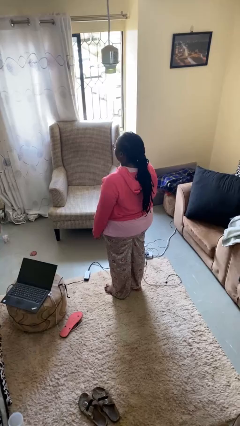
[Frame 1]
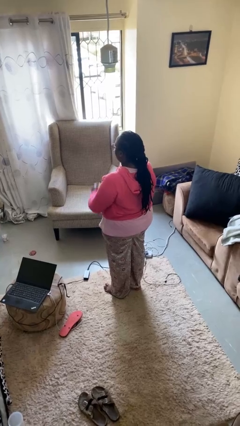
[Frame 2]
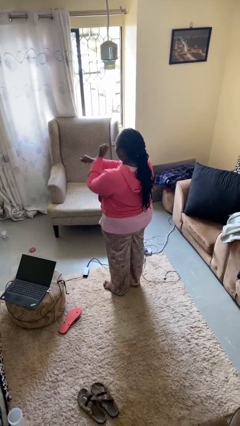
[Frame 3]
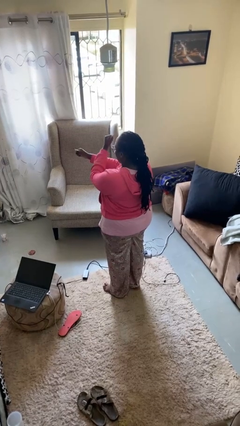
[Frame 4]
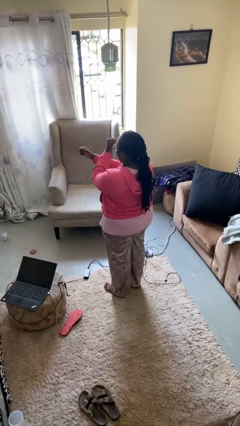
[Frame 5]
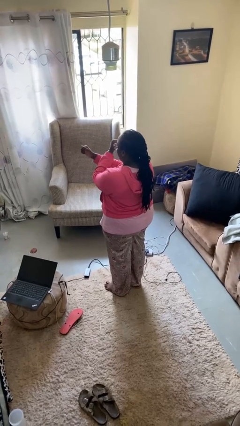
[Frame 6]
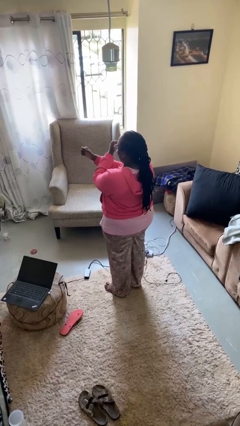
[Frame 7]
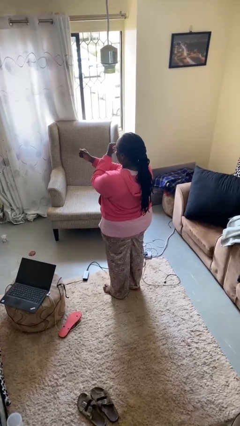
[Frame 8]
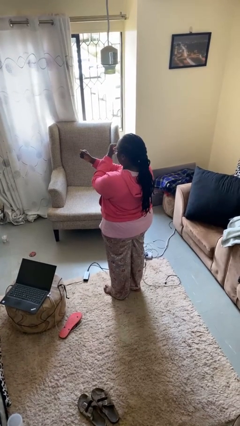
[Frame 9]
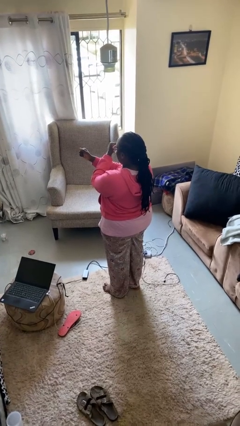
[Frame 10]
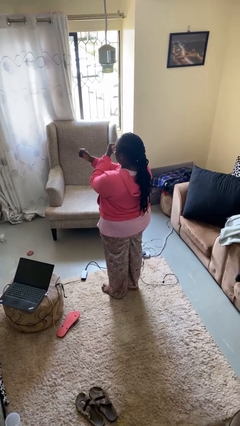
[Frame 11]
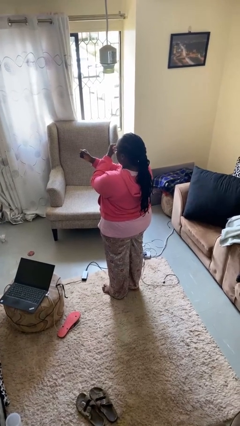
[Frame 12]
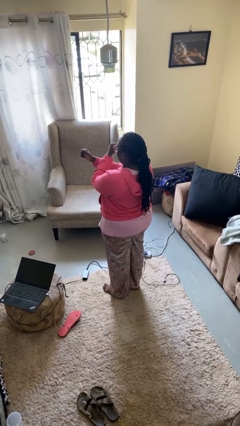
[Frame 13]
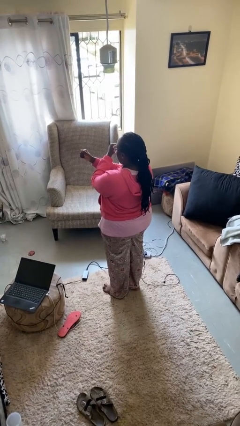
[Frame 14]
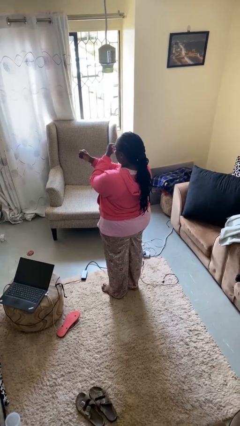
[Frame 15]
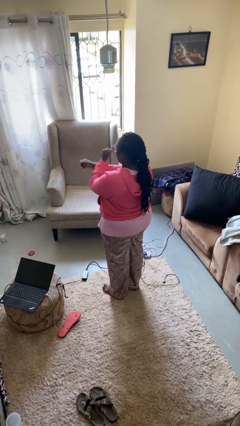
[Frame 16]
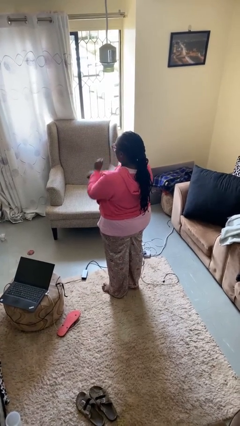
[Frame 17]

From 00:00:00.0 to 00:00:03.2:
person gestures arms x

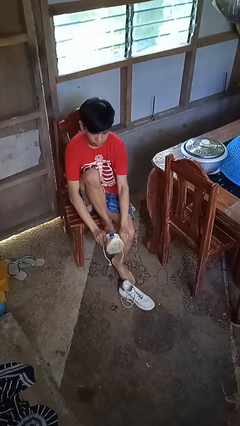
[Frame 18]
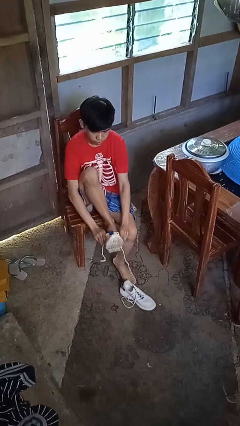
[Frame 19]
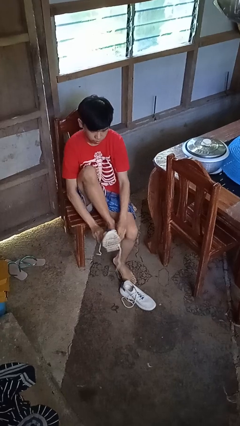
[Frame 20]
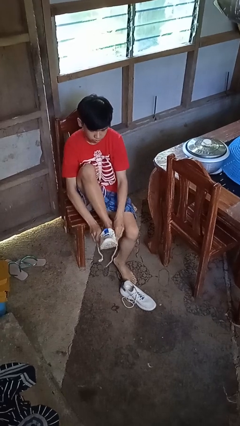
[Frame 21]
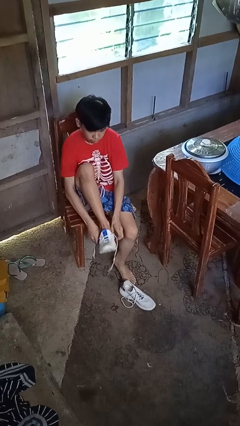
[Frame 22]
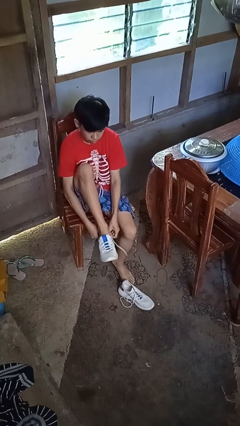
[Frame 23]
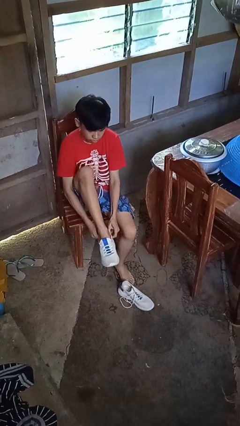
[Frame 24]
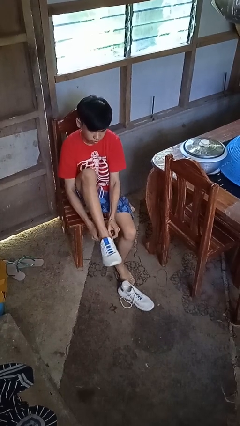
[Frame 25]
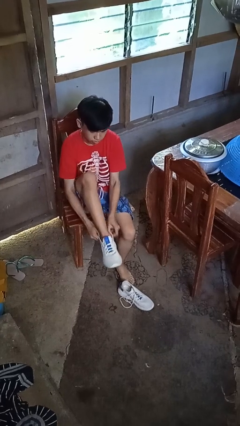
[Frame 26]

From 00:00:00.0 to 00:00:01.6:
person puts on shoes

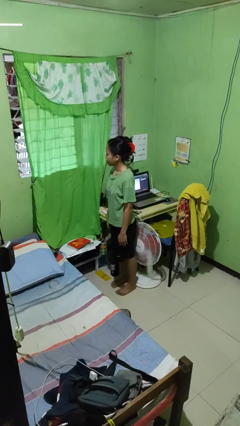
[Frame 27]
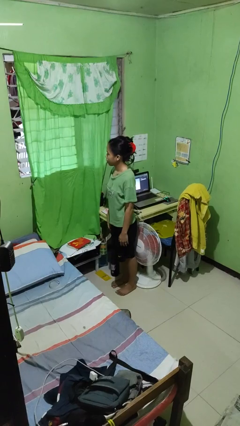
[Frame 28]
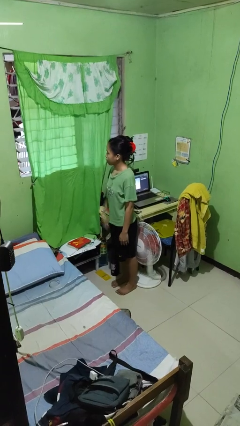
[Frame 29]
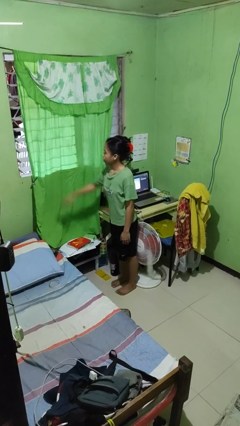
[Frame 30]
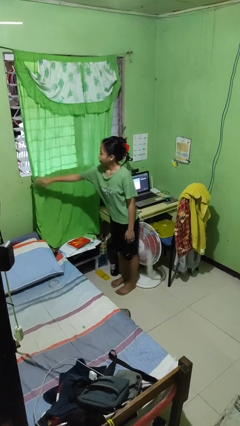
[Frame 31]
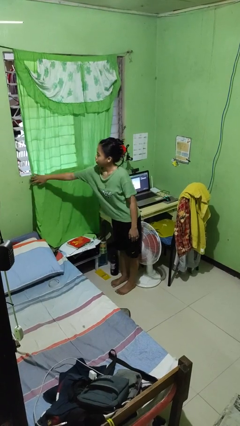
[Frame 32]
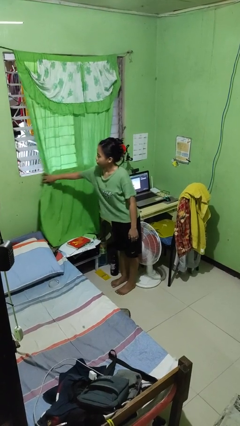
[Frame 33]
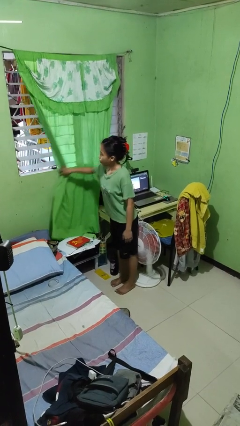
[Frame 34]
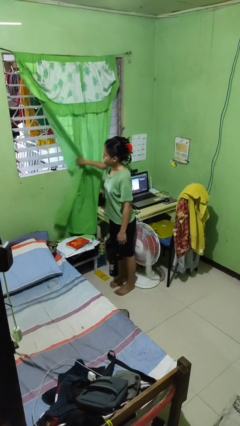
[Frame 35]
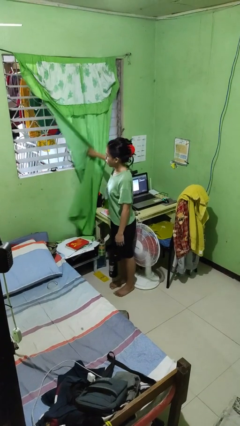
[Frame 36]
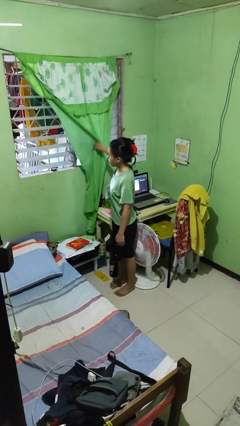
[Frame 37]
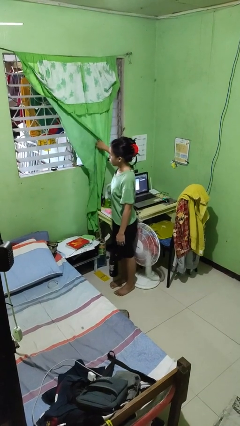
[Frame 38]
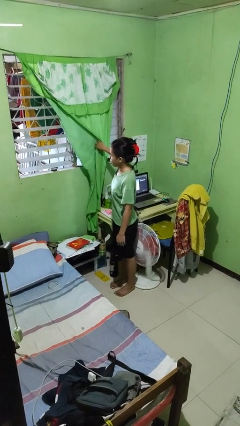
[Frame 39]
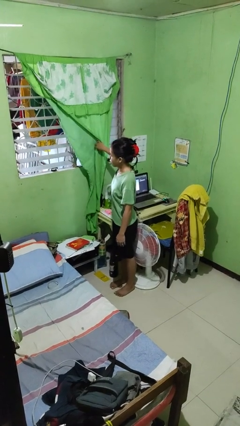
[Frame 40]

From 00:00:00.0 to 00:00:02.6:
person opens curtains

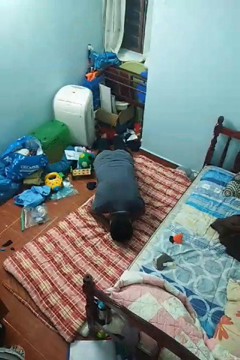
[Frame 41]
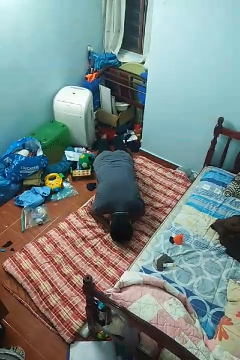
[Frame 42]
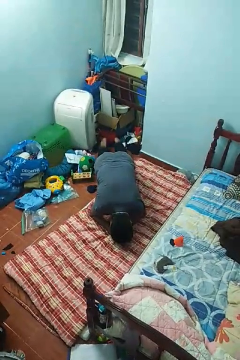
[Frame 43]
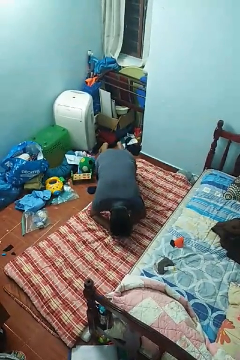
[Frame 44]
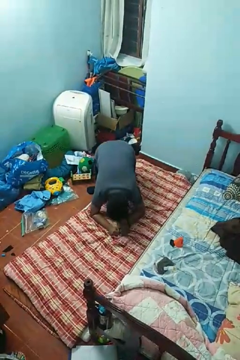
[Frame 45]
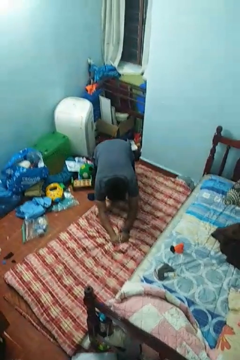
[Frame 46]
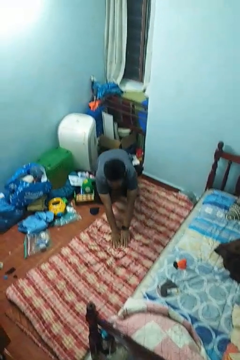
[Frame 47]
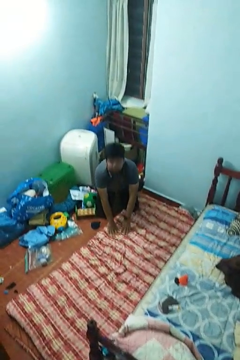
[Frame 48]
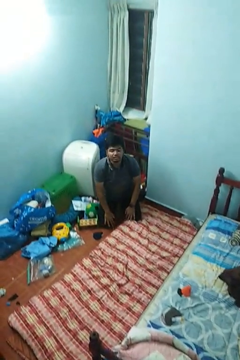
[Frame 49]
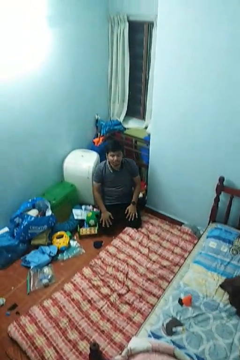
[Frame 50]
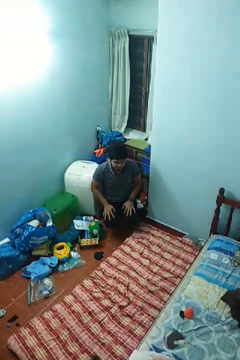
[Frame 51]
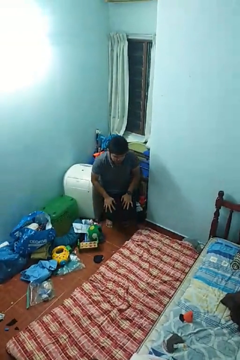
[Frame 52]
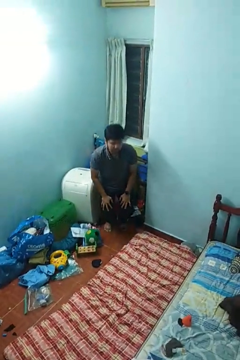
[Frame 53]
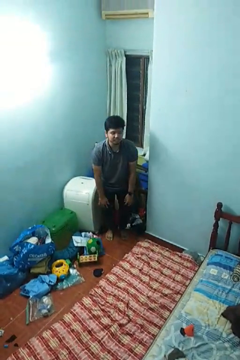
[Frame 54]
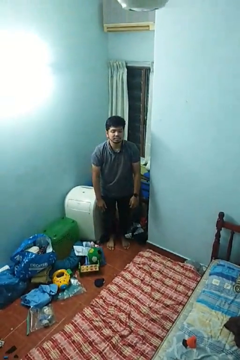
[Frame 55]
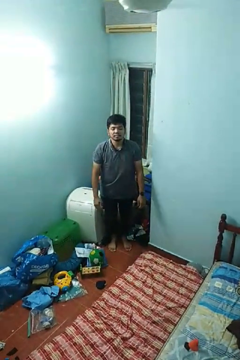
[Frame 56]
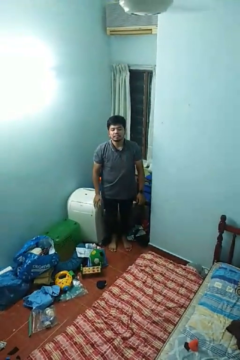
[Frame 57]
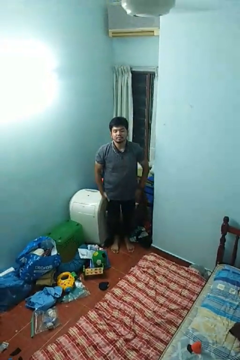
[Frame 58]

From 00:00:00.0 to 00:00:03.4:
person stands up from floor

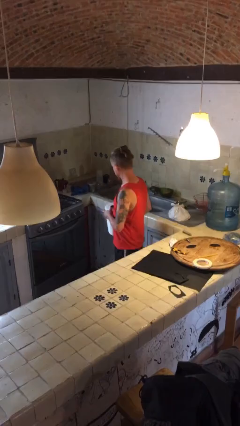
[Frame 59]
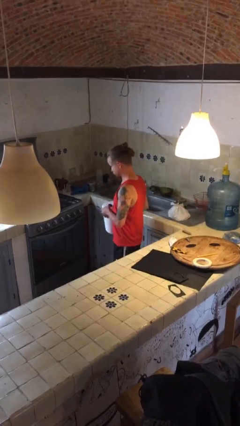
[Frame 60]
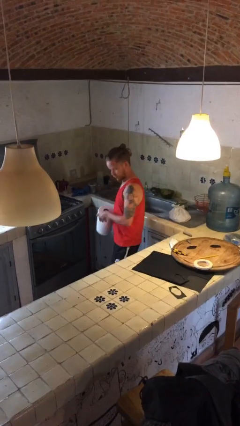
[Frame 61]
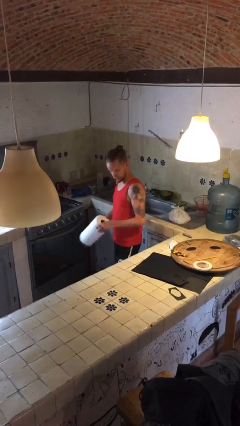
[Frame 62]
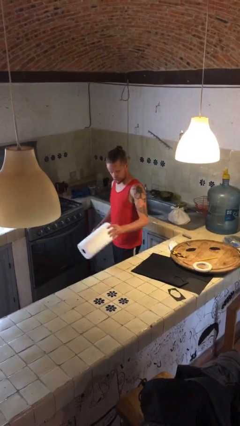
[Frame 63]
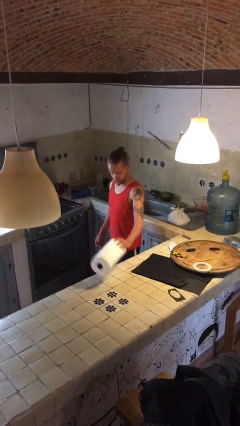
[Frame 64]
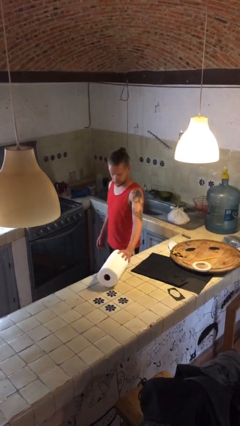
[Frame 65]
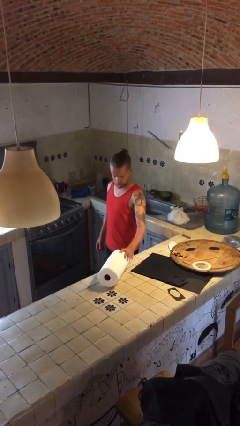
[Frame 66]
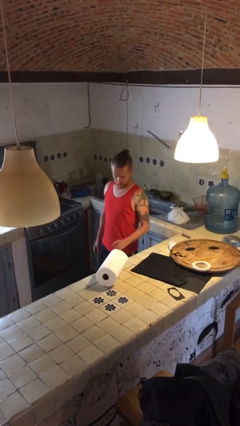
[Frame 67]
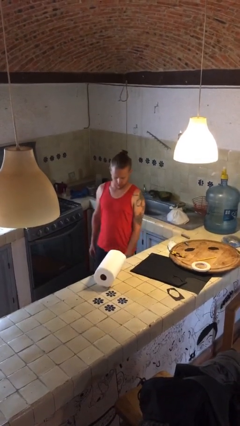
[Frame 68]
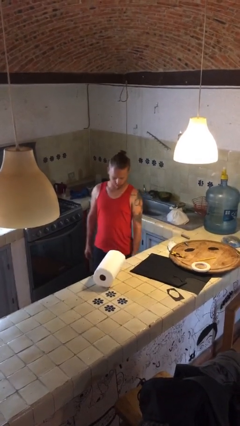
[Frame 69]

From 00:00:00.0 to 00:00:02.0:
person puts down object on countertop

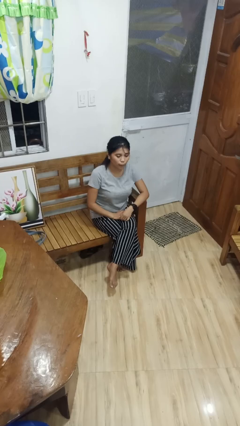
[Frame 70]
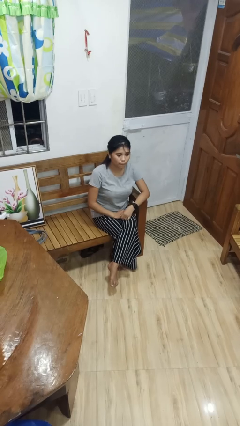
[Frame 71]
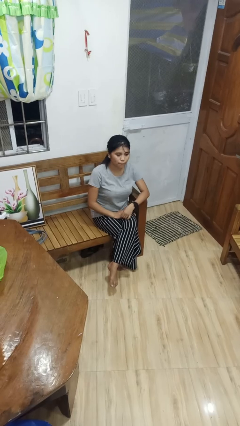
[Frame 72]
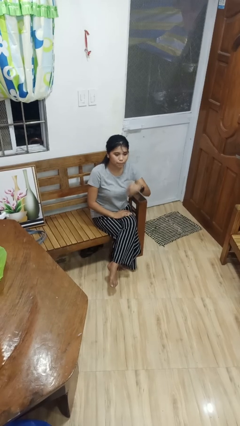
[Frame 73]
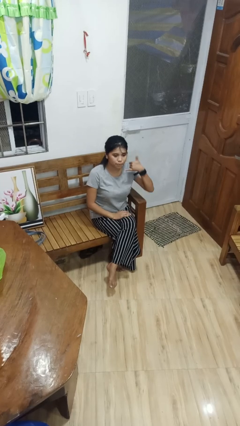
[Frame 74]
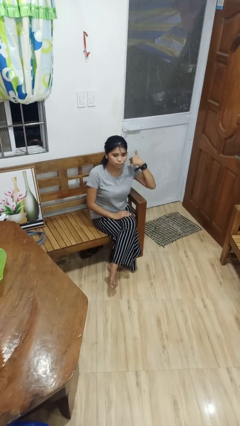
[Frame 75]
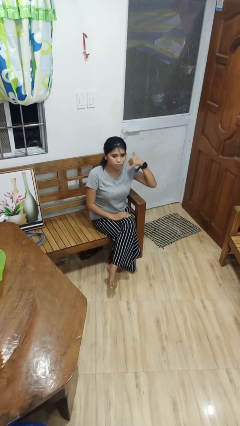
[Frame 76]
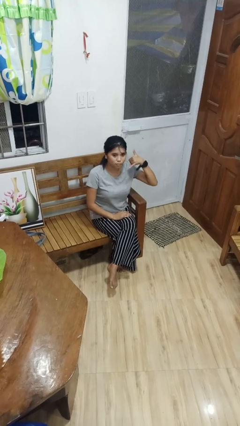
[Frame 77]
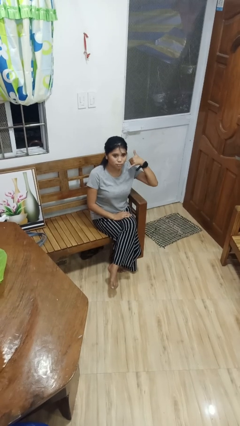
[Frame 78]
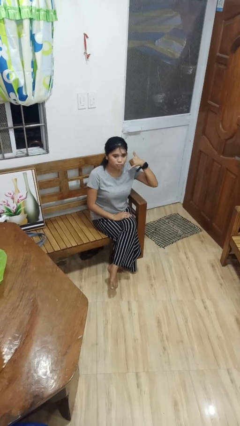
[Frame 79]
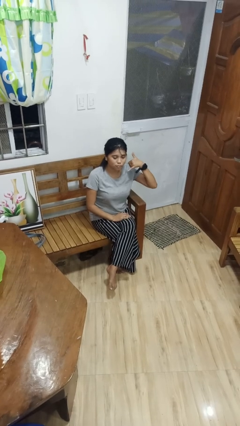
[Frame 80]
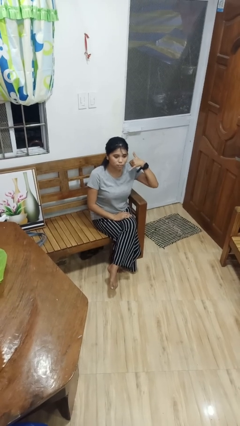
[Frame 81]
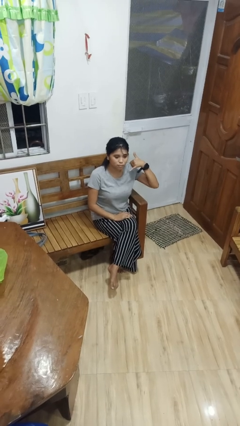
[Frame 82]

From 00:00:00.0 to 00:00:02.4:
person gestures call me

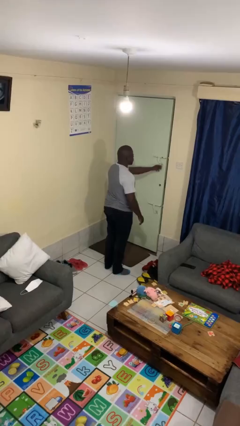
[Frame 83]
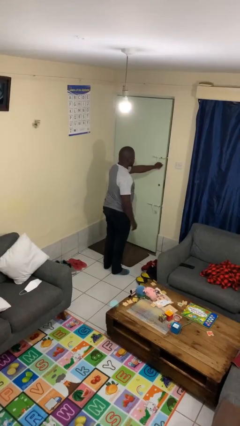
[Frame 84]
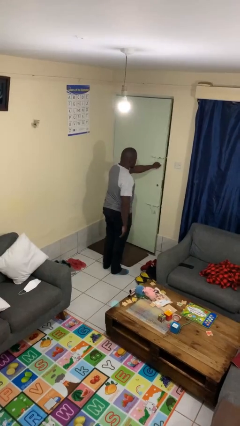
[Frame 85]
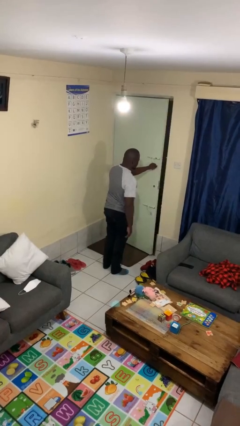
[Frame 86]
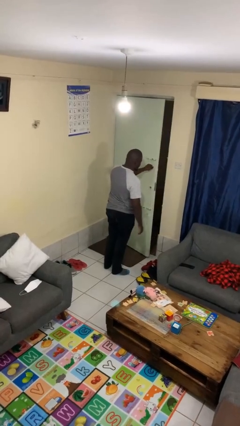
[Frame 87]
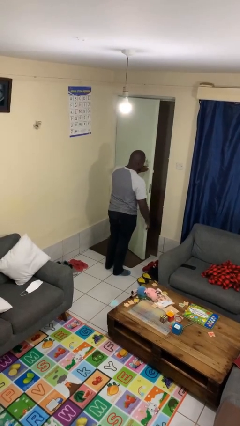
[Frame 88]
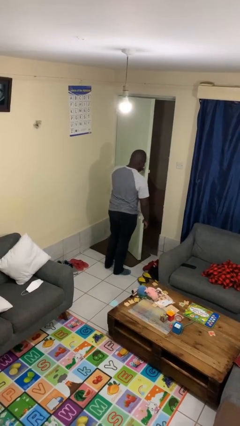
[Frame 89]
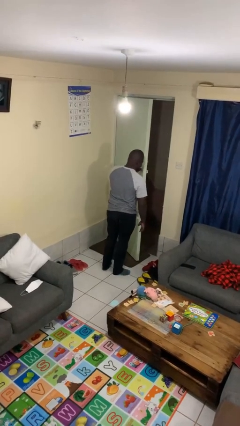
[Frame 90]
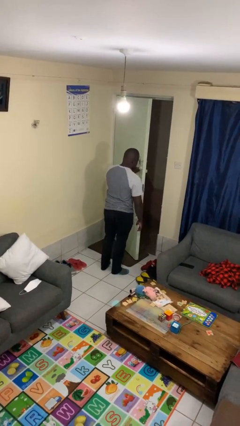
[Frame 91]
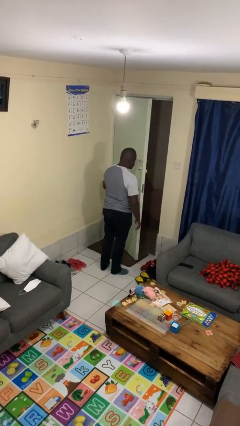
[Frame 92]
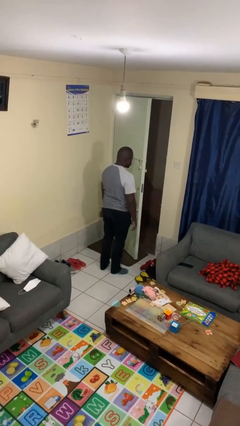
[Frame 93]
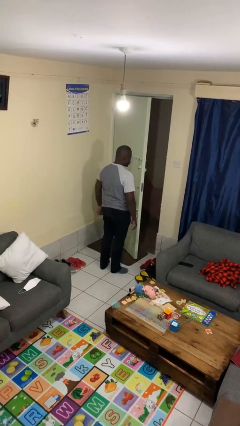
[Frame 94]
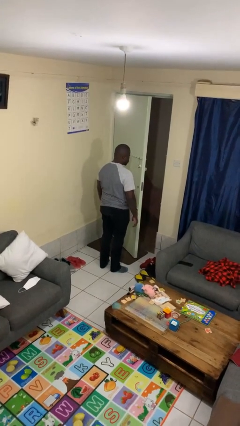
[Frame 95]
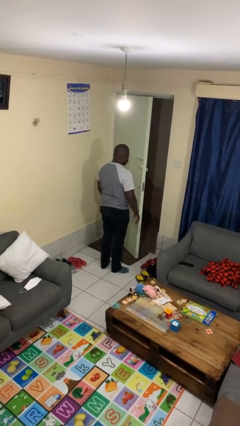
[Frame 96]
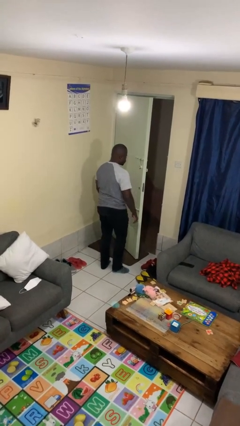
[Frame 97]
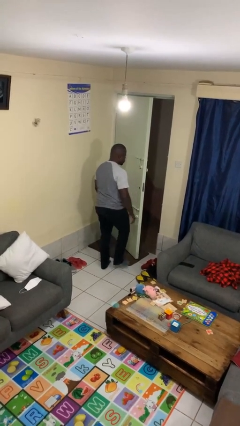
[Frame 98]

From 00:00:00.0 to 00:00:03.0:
person opens facility door
